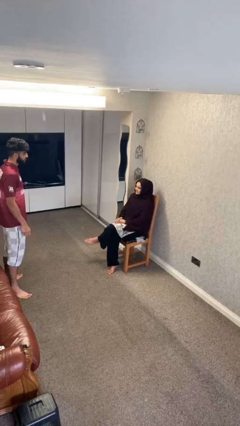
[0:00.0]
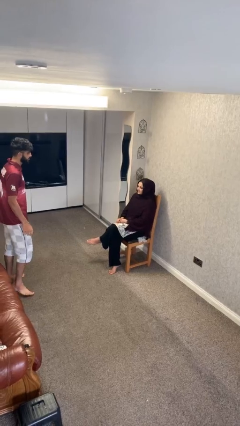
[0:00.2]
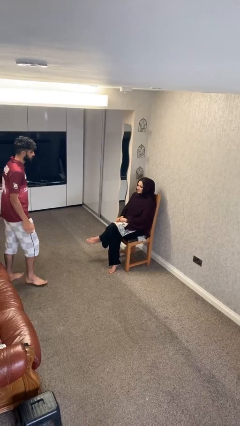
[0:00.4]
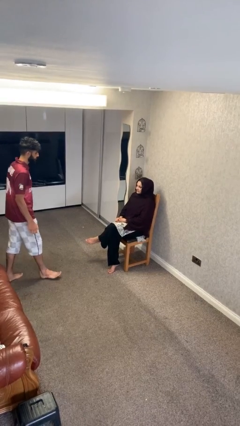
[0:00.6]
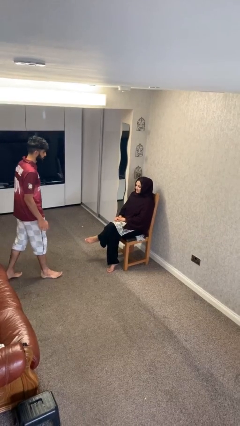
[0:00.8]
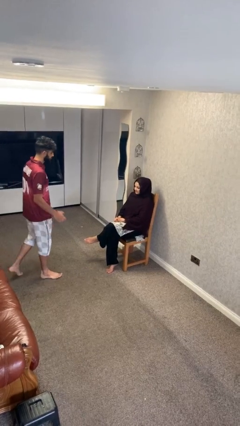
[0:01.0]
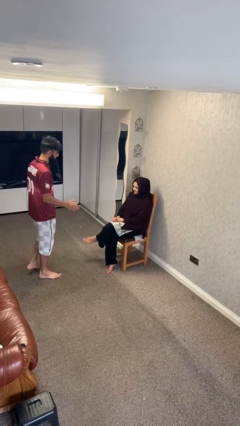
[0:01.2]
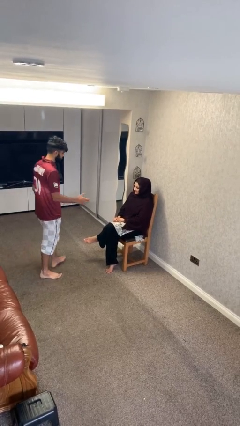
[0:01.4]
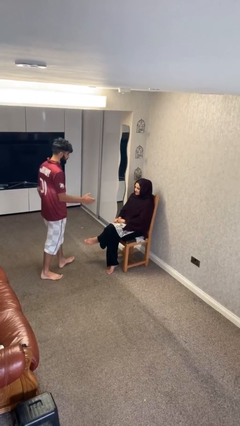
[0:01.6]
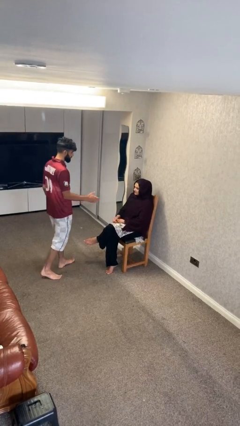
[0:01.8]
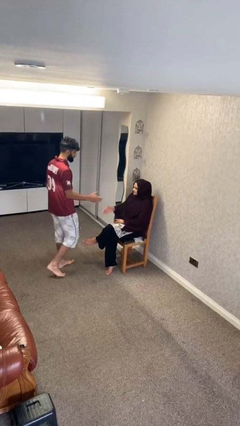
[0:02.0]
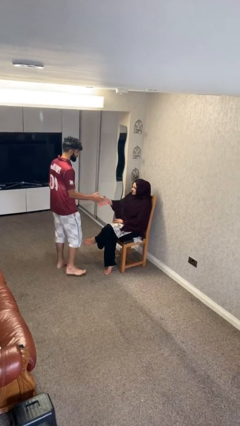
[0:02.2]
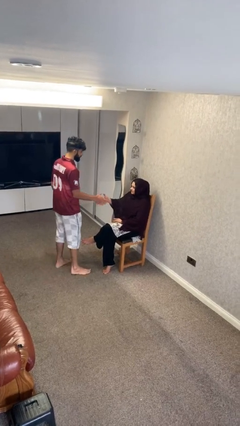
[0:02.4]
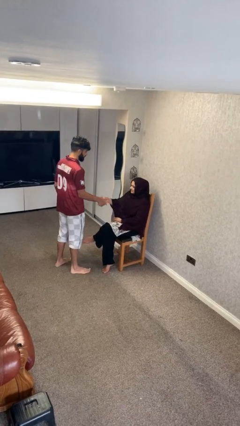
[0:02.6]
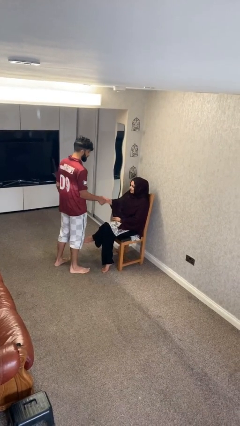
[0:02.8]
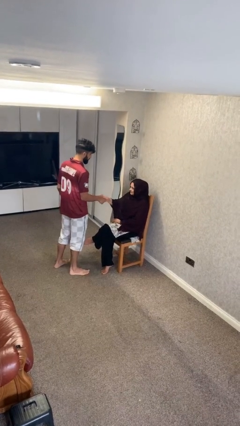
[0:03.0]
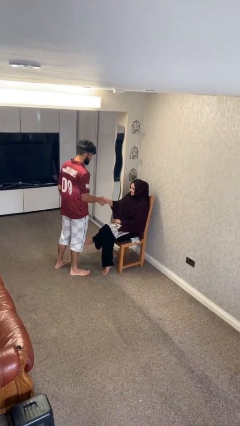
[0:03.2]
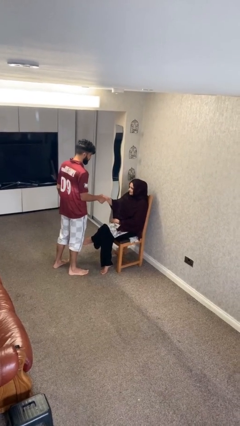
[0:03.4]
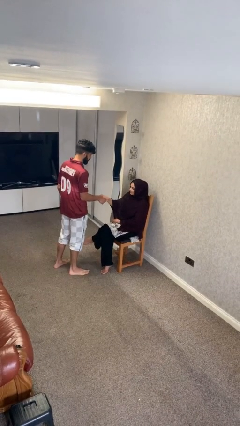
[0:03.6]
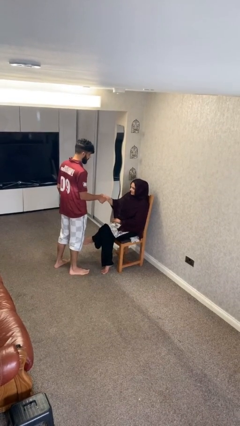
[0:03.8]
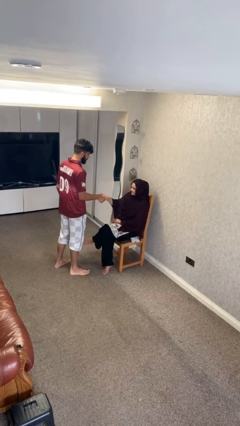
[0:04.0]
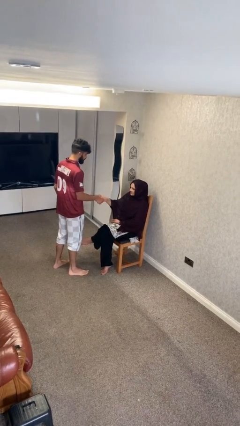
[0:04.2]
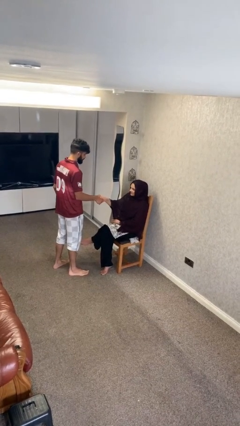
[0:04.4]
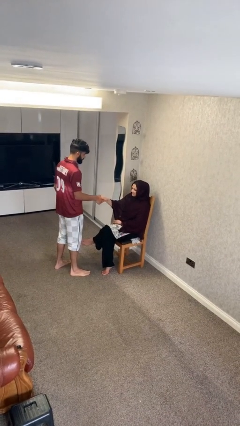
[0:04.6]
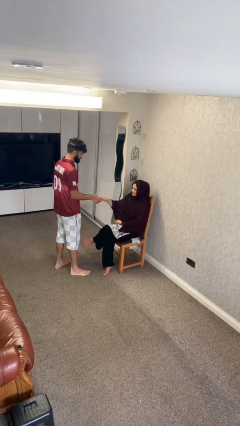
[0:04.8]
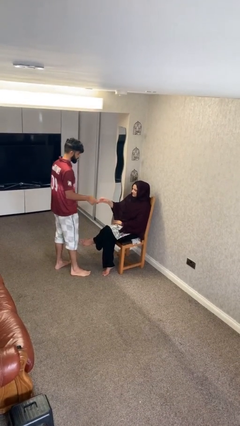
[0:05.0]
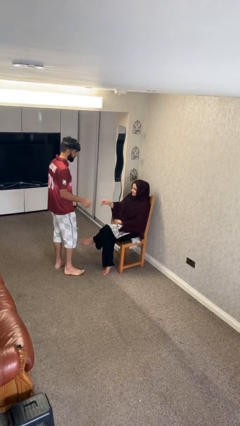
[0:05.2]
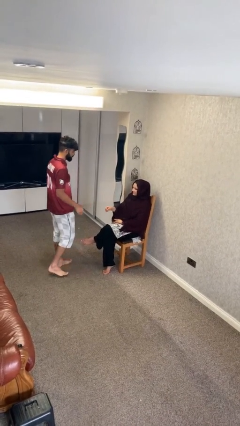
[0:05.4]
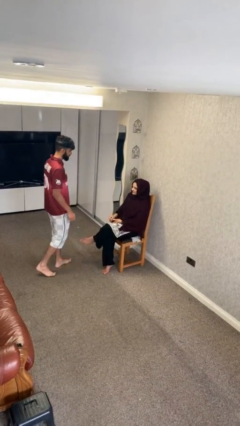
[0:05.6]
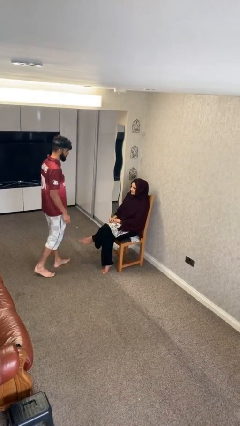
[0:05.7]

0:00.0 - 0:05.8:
person shakes hand

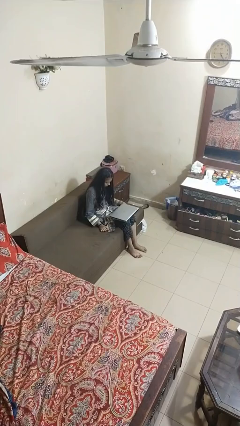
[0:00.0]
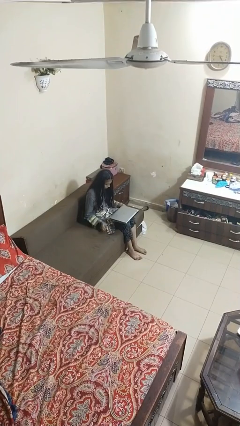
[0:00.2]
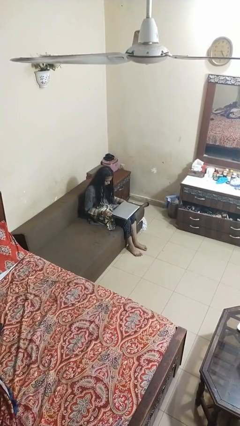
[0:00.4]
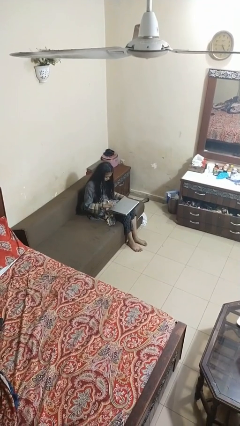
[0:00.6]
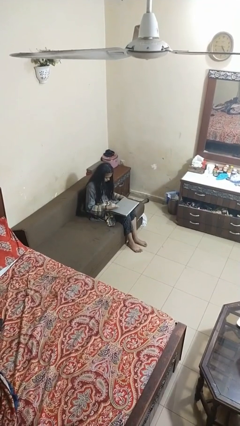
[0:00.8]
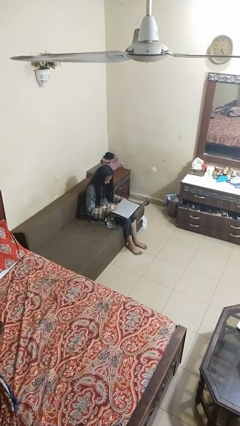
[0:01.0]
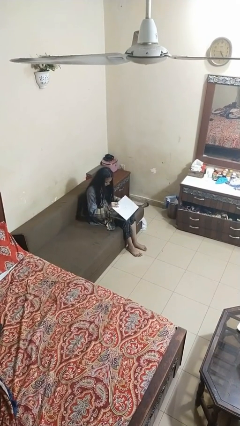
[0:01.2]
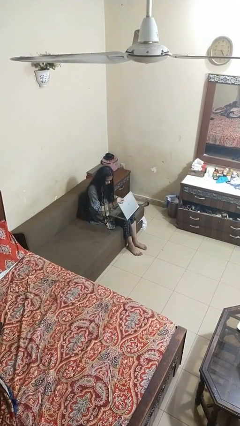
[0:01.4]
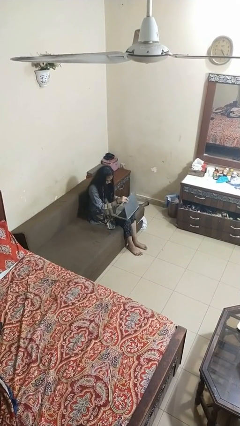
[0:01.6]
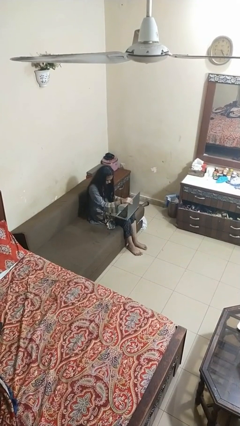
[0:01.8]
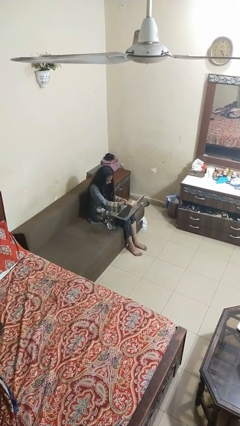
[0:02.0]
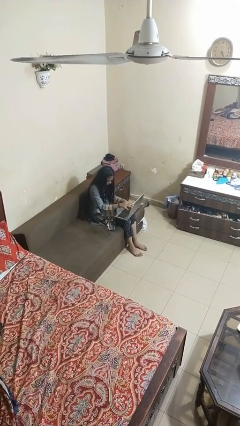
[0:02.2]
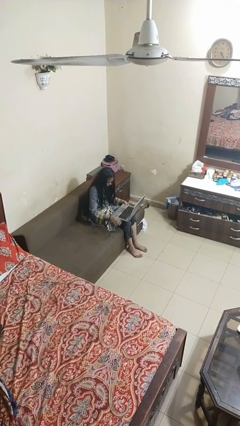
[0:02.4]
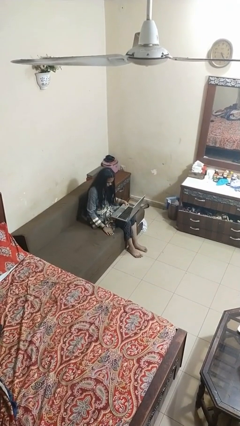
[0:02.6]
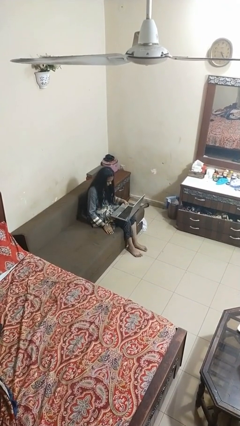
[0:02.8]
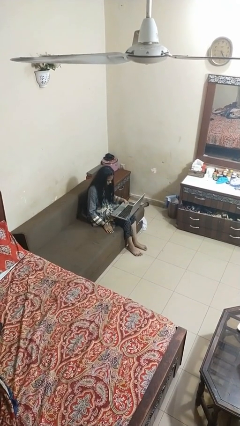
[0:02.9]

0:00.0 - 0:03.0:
person opens laptop

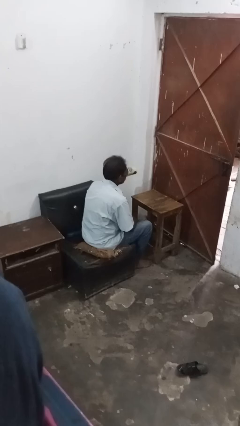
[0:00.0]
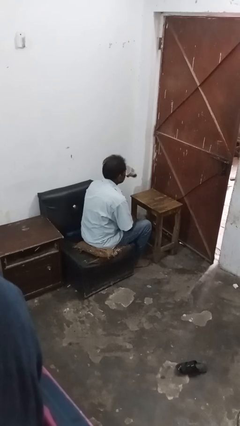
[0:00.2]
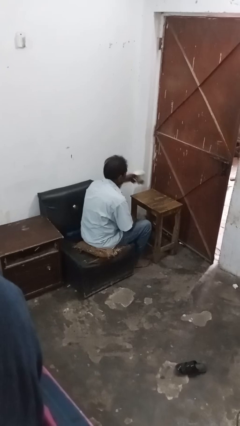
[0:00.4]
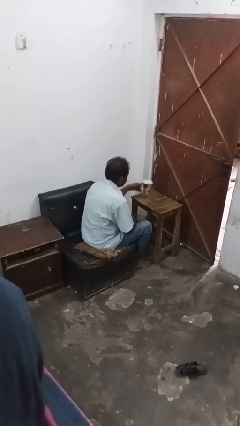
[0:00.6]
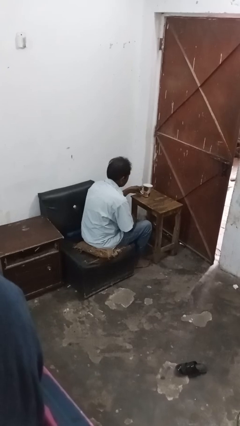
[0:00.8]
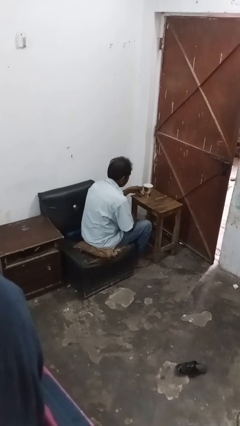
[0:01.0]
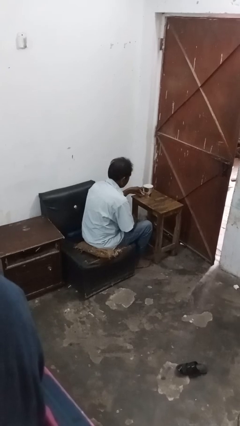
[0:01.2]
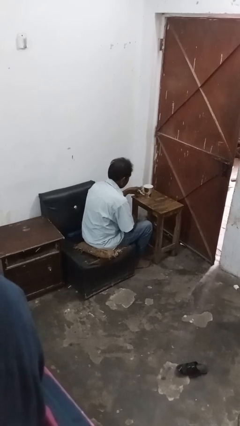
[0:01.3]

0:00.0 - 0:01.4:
person puts down object on table

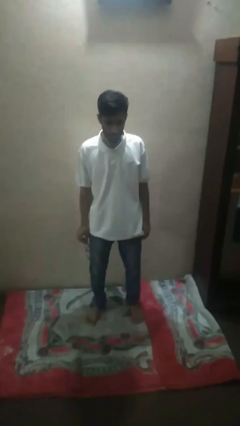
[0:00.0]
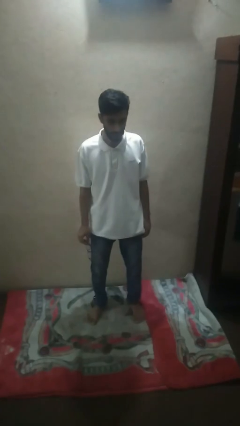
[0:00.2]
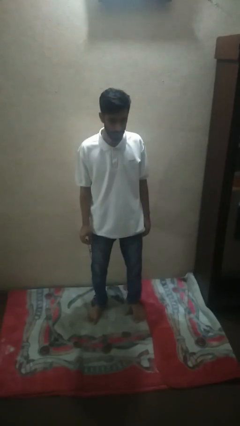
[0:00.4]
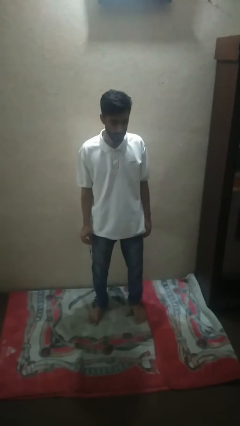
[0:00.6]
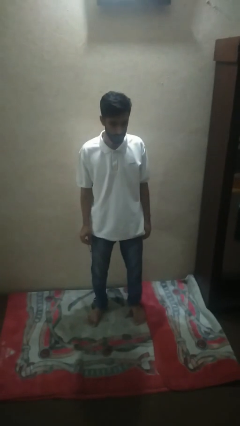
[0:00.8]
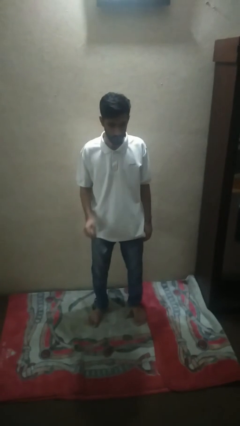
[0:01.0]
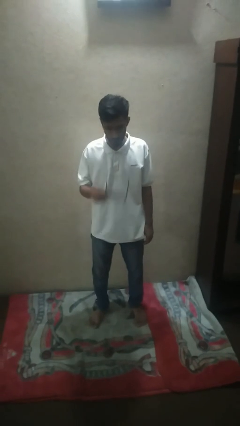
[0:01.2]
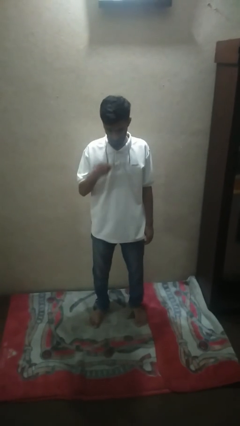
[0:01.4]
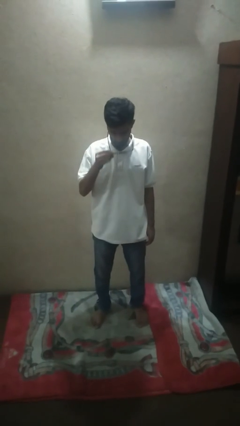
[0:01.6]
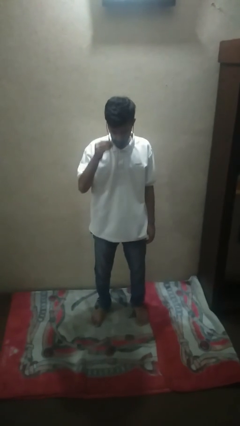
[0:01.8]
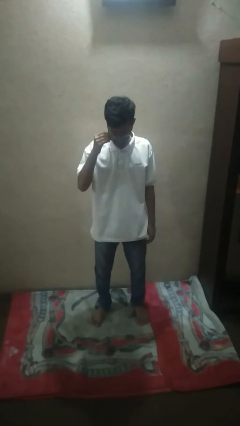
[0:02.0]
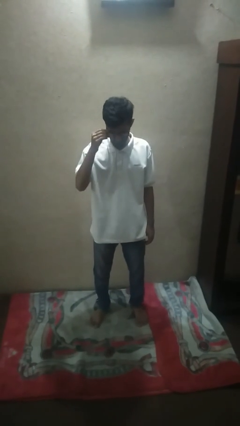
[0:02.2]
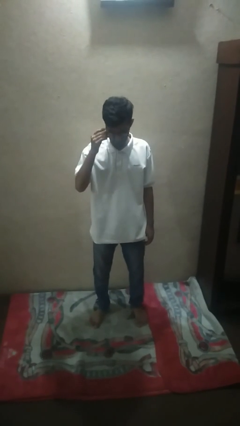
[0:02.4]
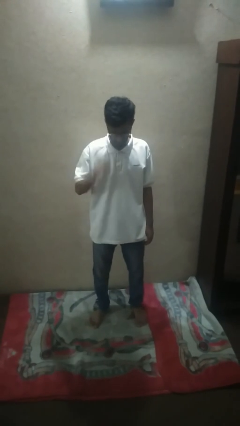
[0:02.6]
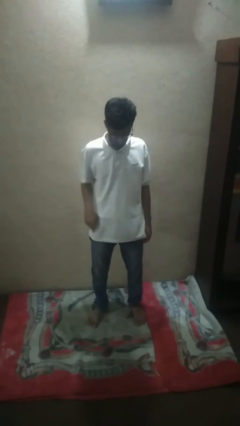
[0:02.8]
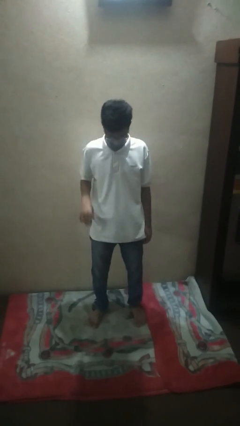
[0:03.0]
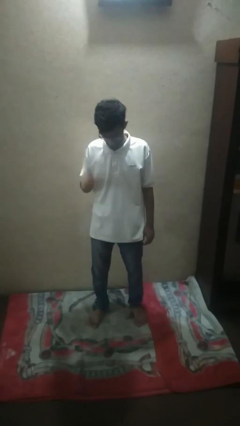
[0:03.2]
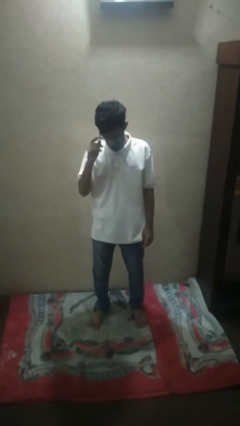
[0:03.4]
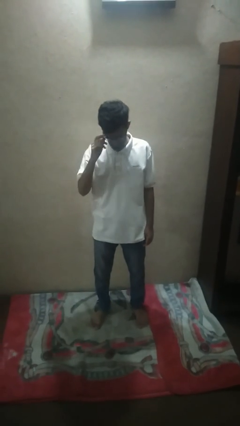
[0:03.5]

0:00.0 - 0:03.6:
person puts on glasses

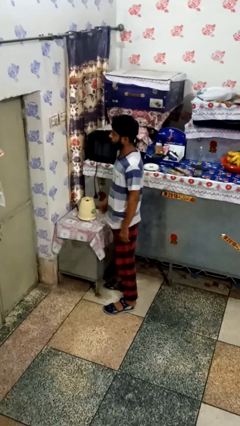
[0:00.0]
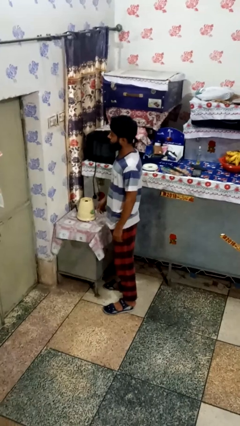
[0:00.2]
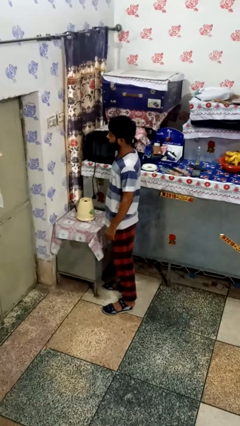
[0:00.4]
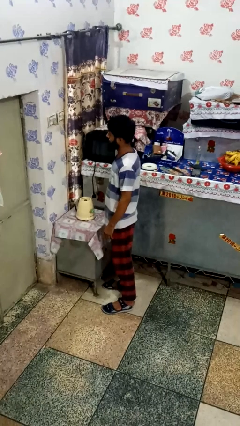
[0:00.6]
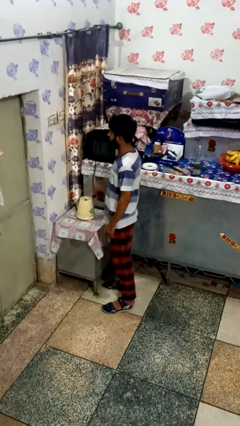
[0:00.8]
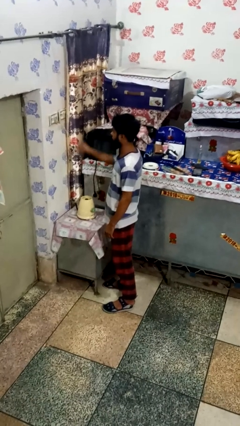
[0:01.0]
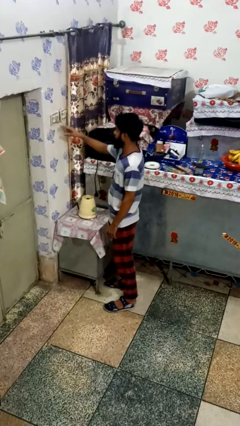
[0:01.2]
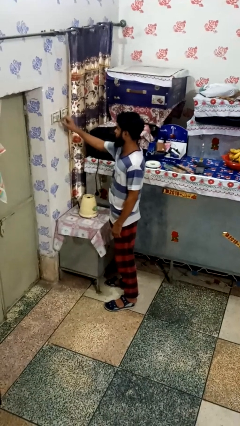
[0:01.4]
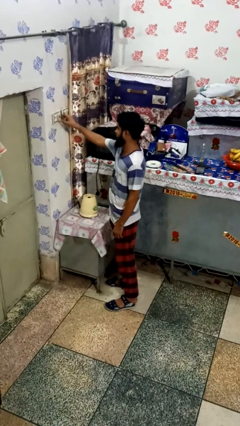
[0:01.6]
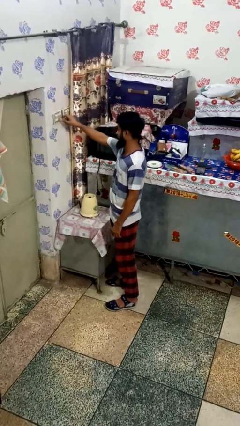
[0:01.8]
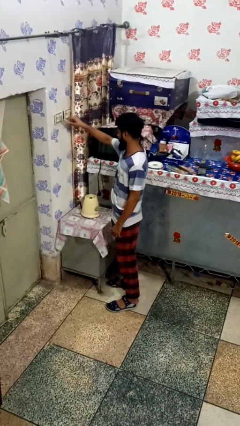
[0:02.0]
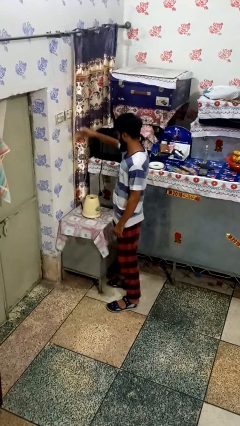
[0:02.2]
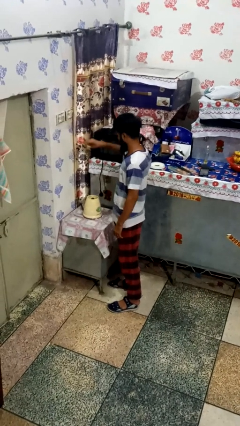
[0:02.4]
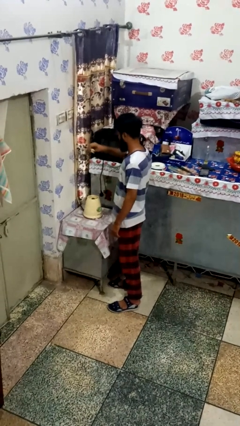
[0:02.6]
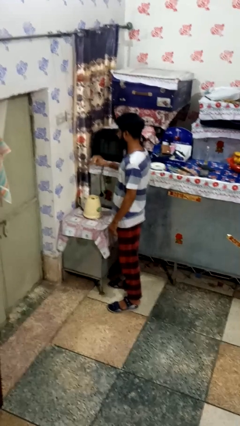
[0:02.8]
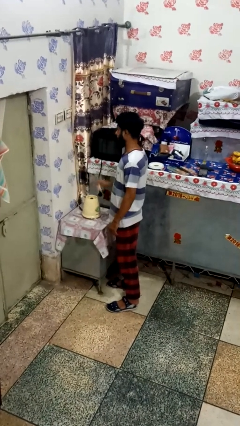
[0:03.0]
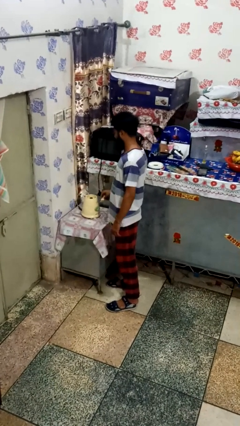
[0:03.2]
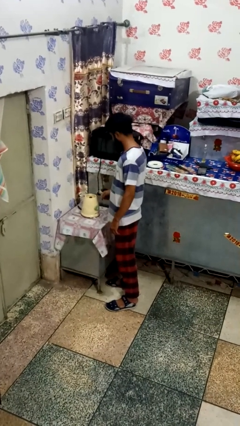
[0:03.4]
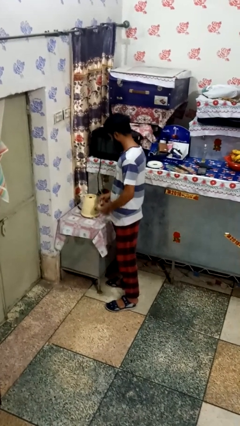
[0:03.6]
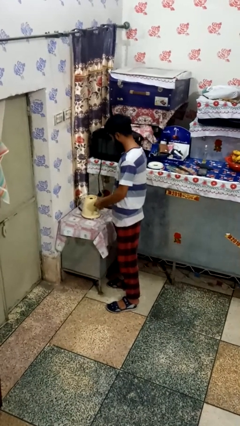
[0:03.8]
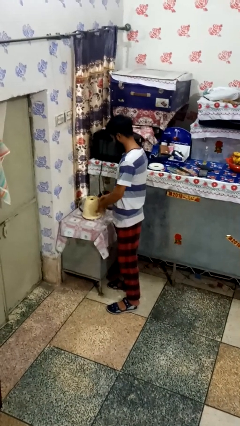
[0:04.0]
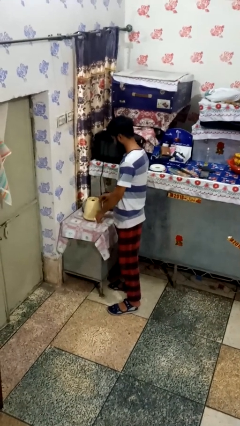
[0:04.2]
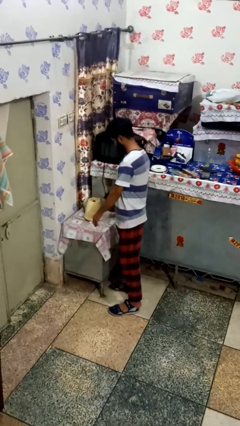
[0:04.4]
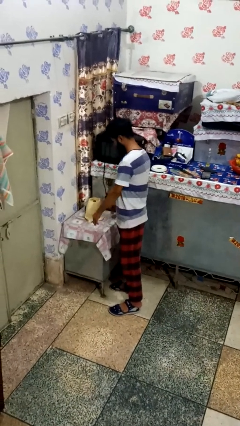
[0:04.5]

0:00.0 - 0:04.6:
person unplugs from electrical socket
